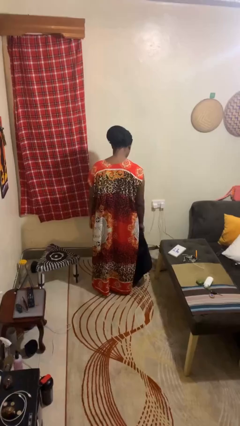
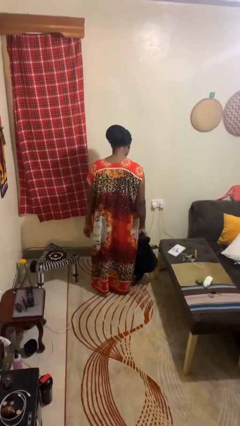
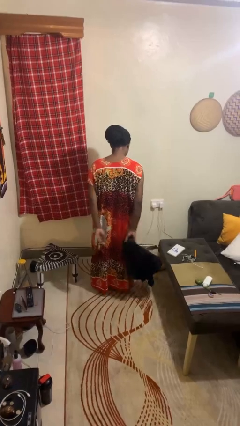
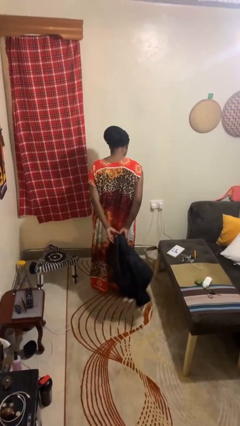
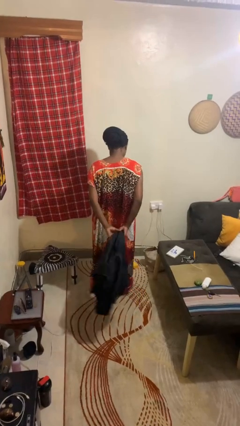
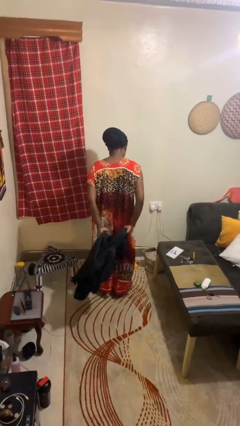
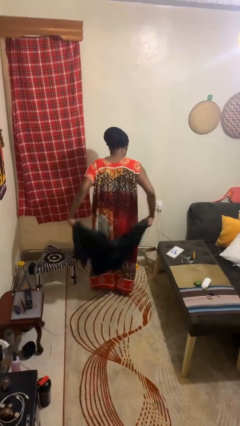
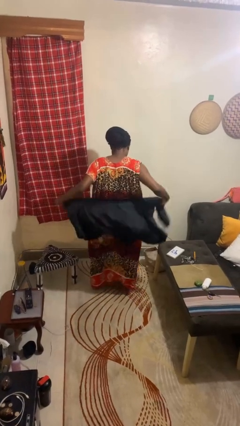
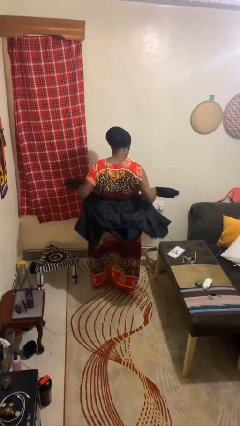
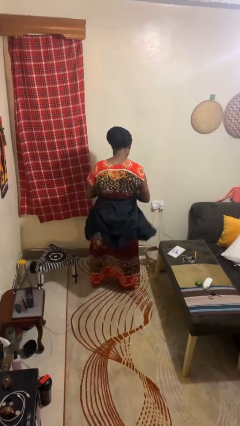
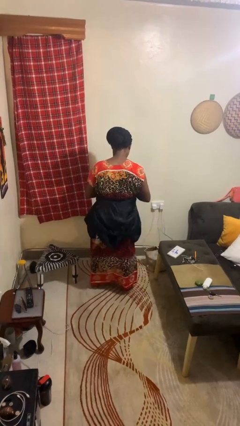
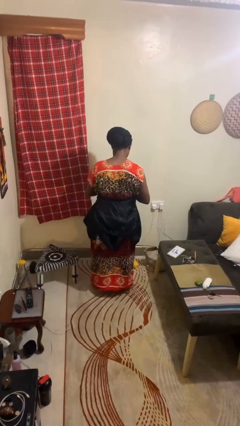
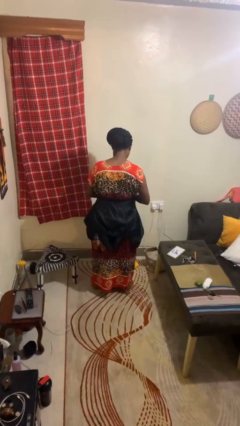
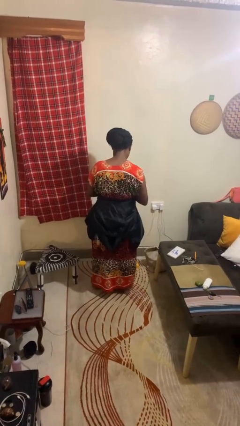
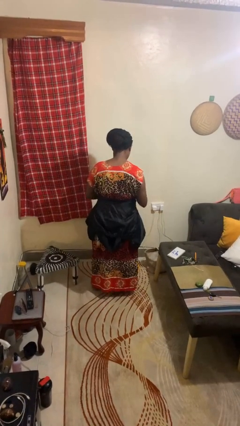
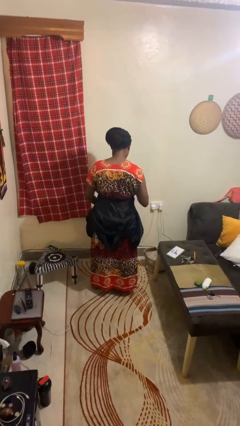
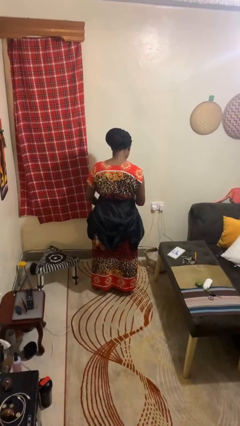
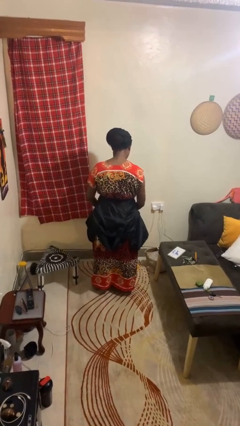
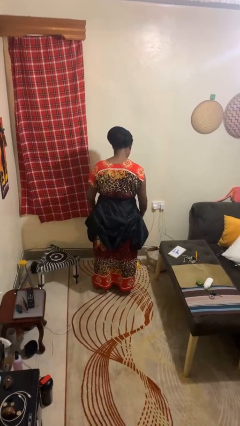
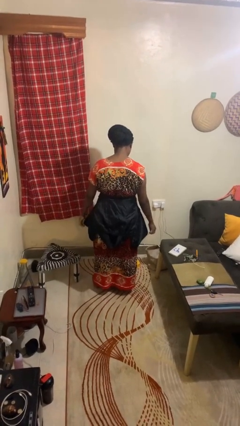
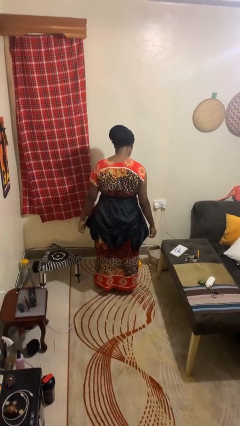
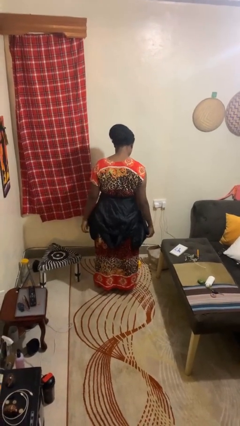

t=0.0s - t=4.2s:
person ties jacket around waist

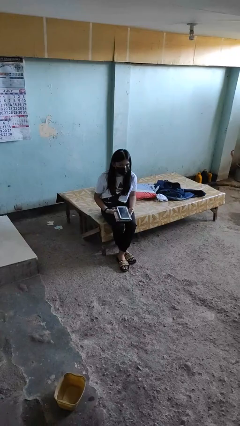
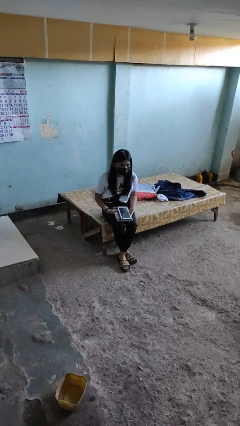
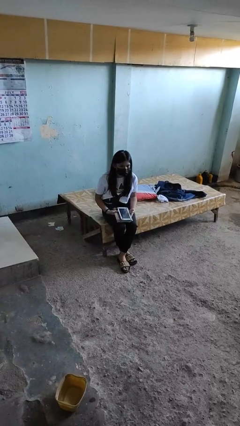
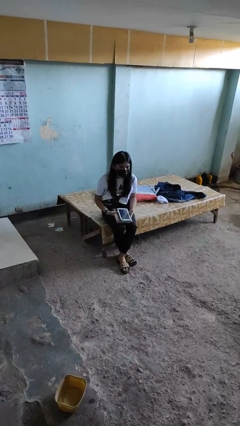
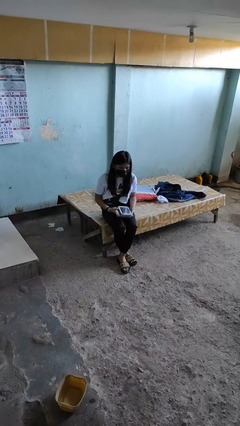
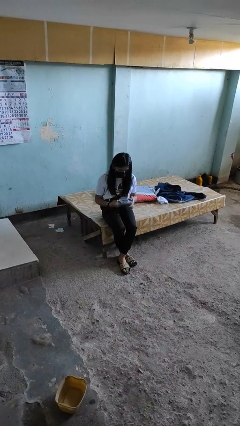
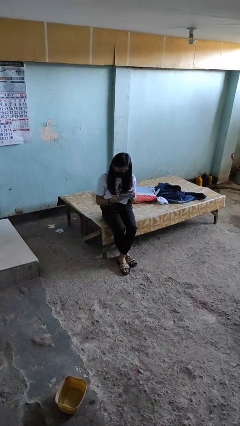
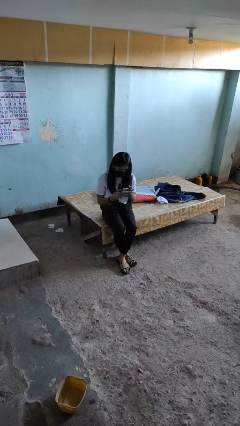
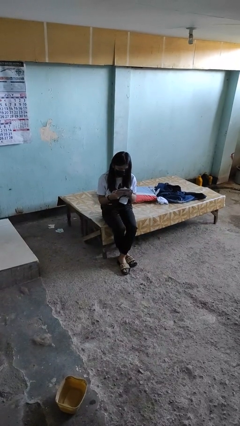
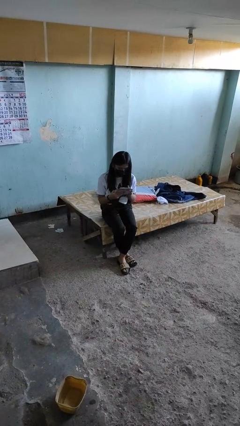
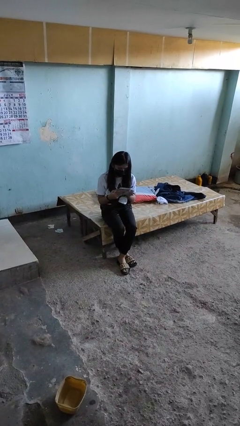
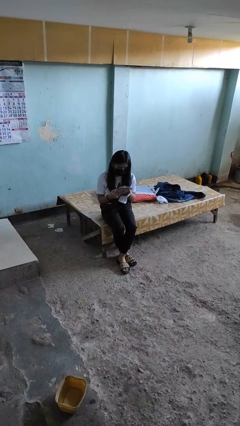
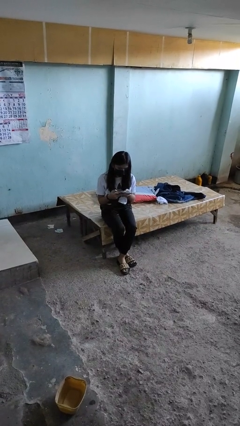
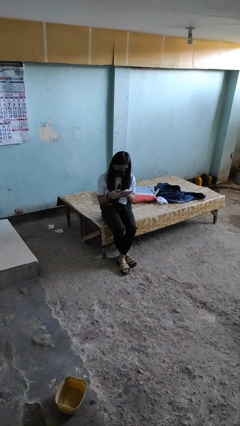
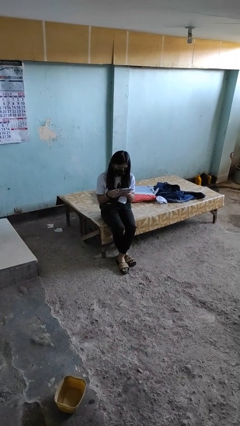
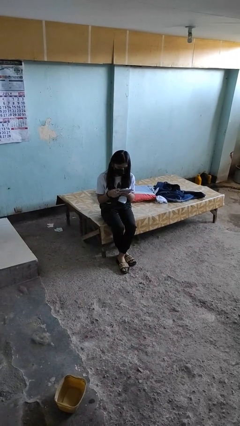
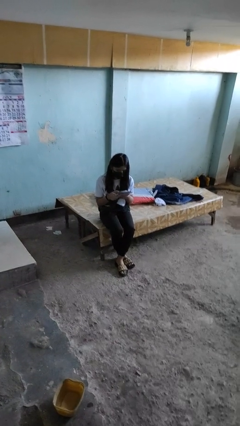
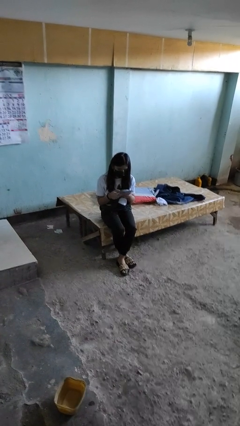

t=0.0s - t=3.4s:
person interacts with tablet

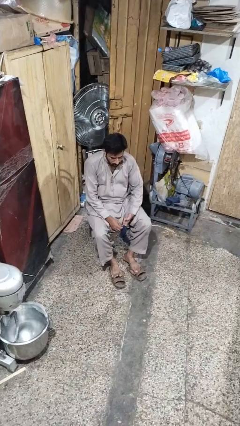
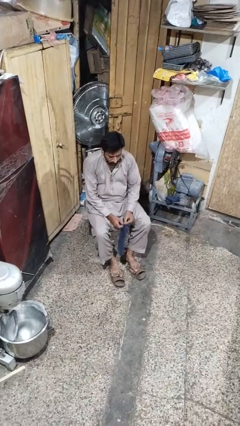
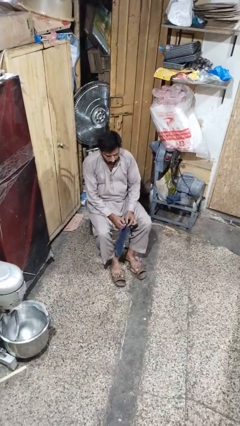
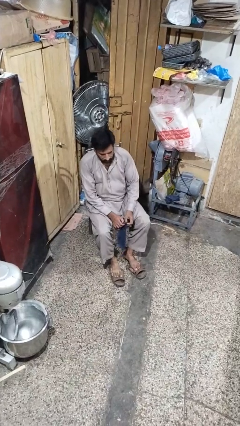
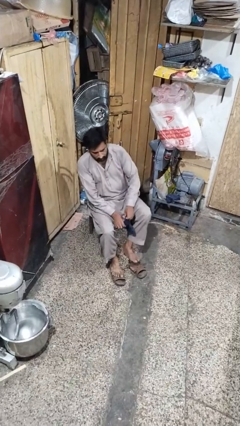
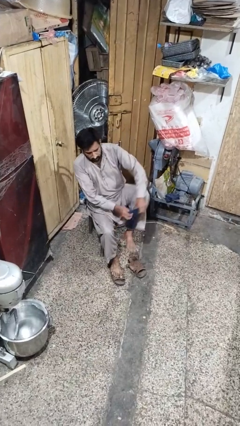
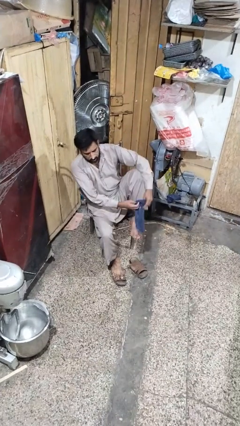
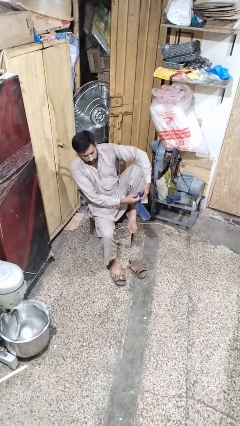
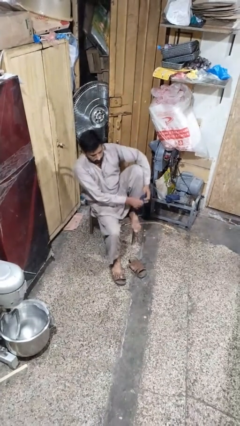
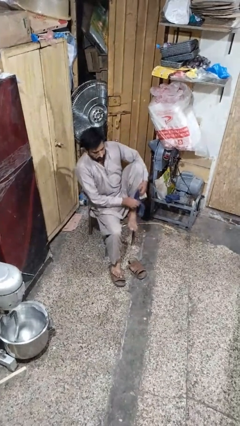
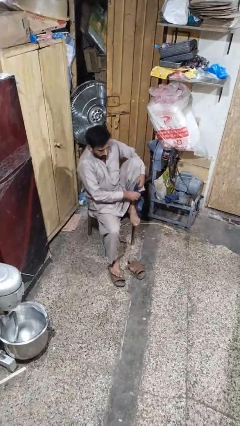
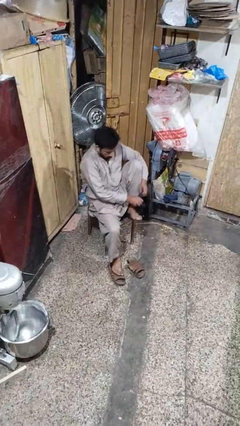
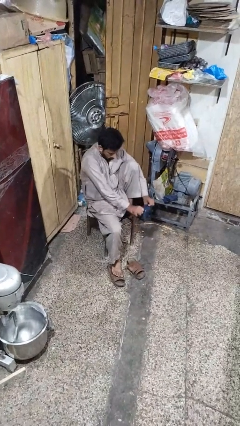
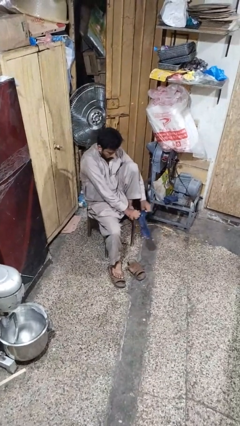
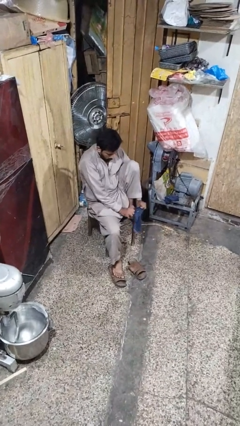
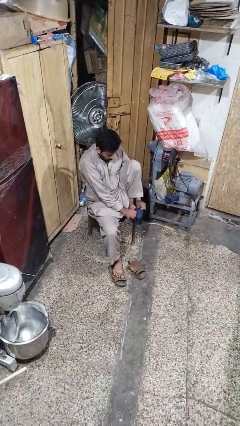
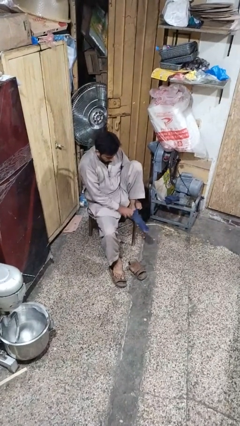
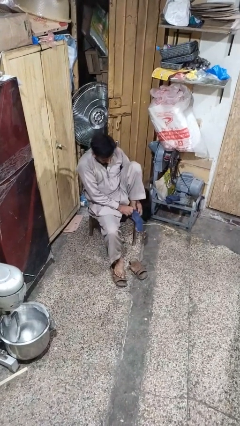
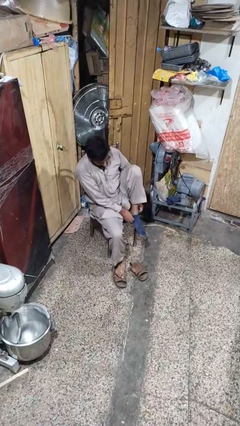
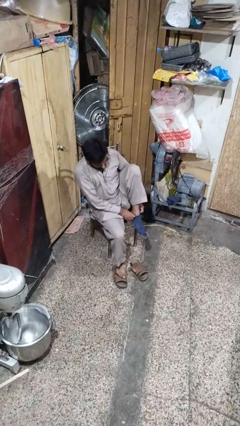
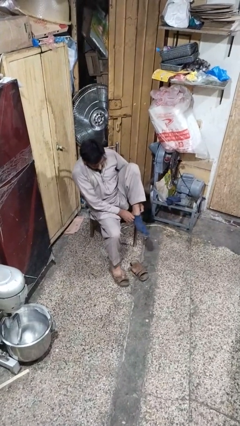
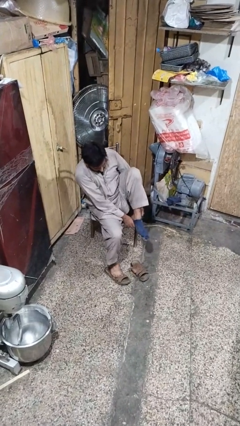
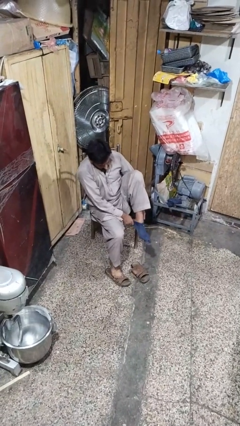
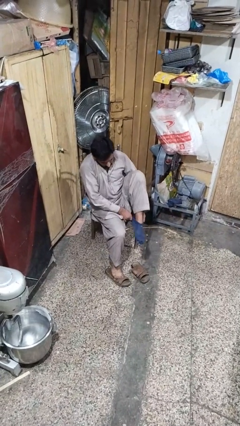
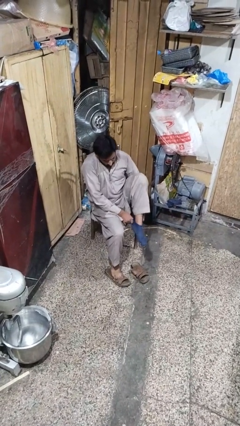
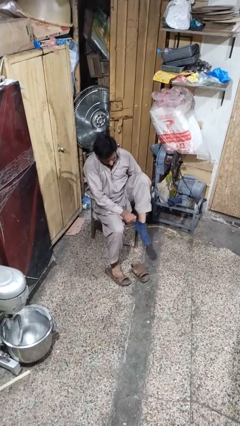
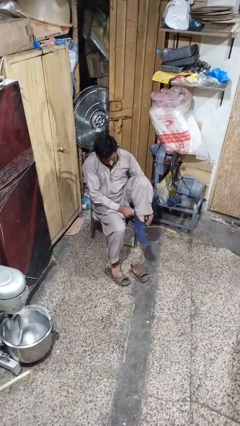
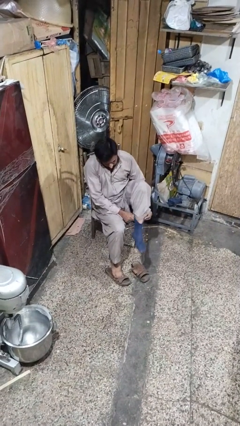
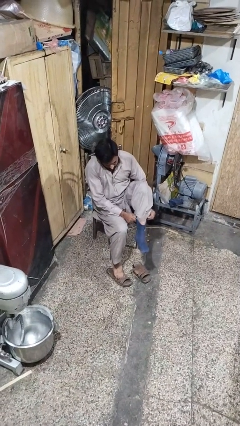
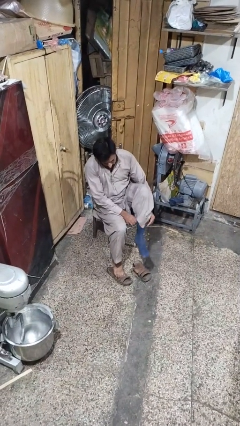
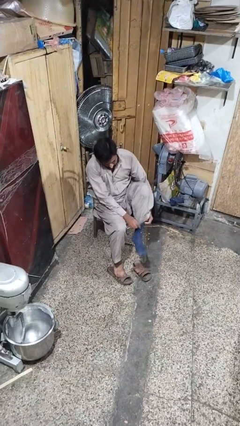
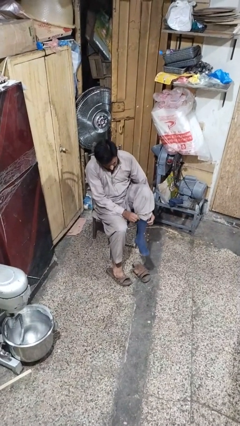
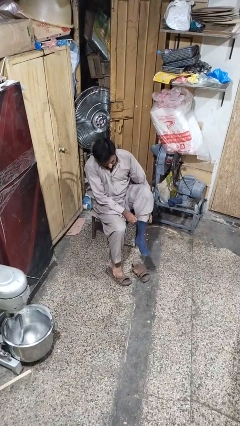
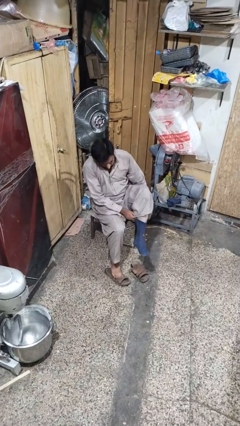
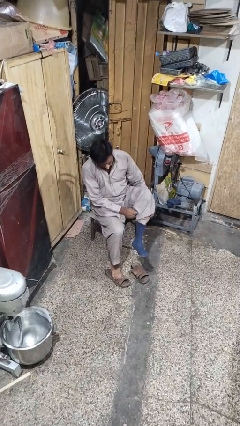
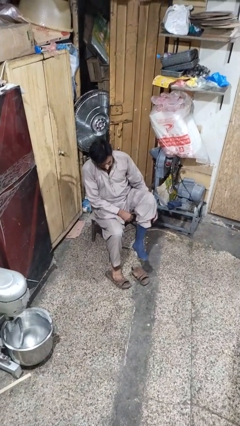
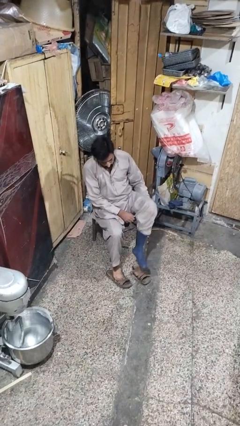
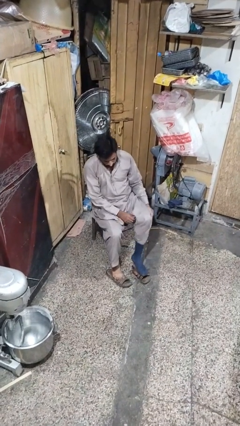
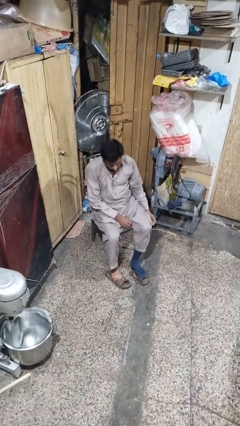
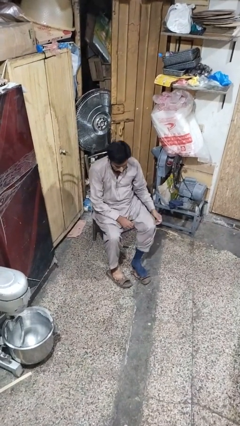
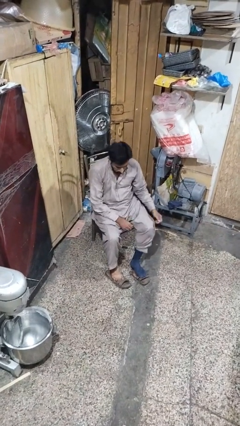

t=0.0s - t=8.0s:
person puts on socks

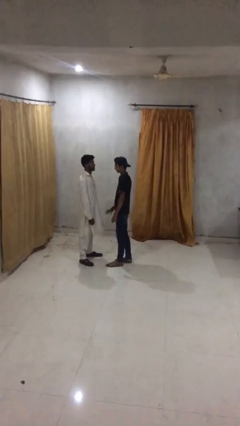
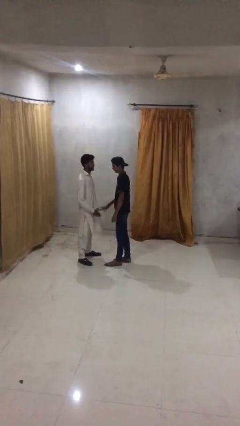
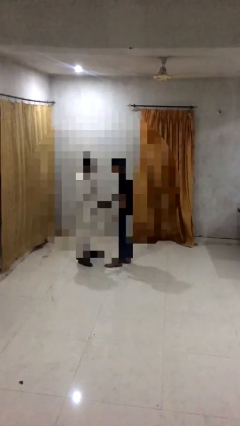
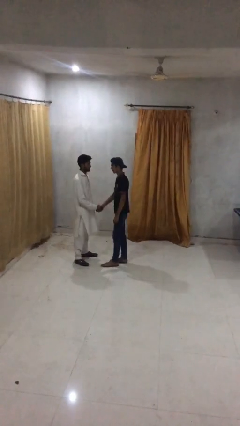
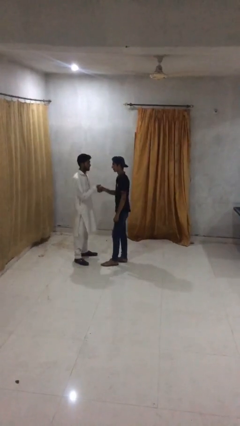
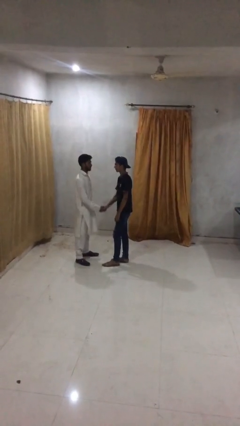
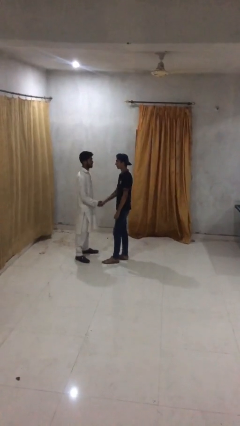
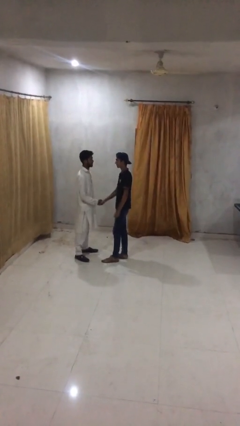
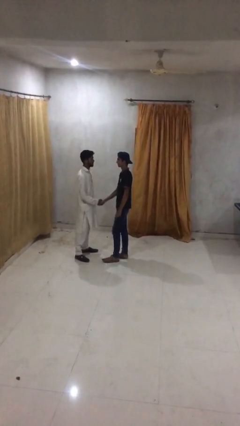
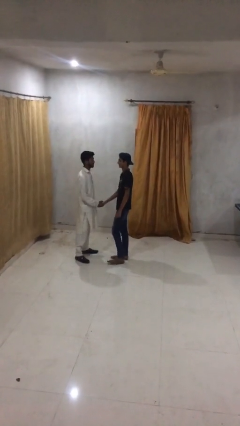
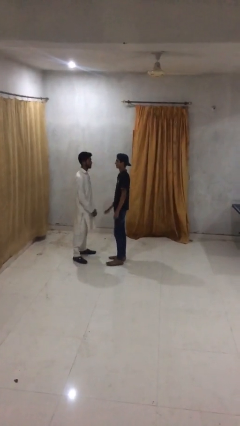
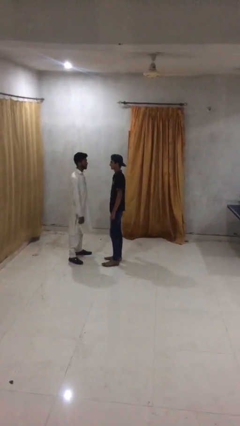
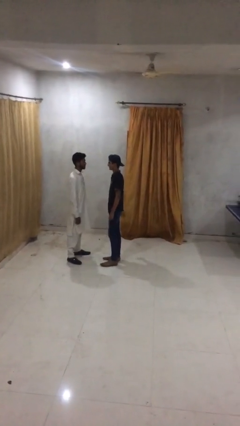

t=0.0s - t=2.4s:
person shakes hand
